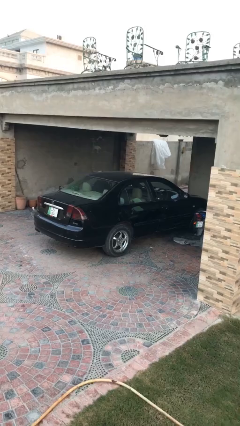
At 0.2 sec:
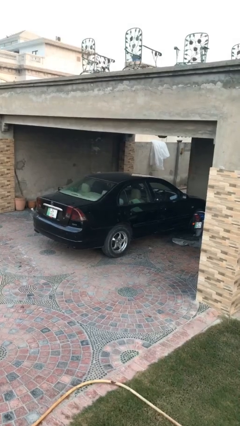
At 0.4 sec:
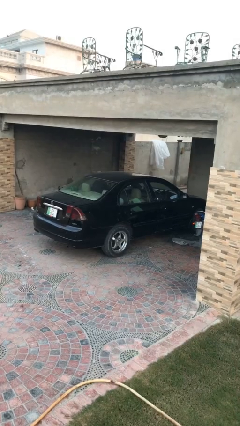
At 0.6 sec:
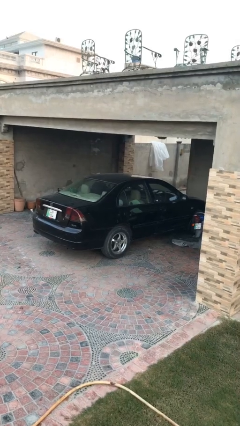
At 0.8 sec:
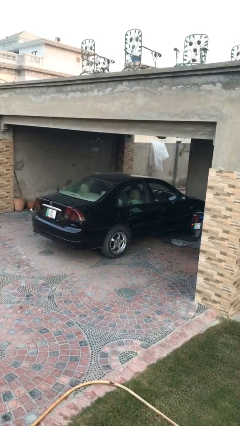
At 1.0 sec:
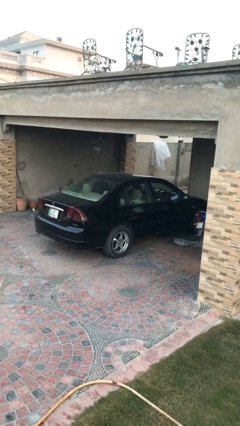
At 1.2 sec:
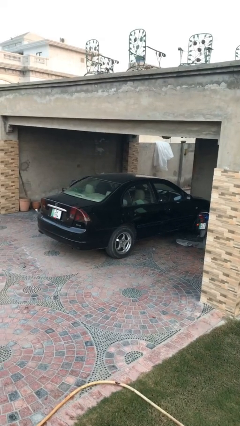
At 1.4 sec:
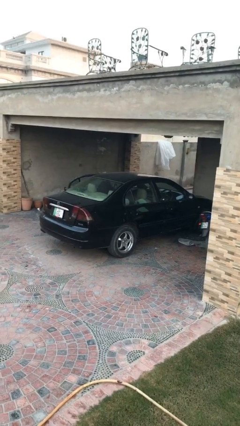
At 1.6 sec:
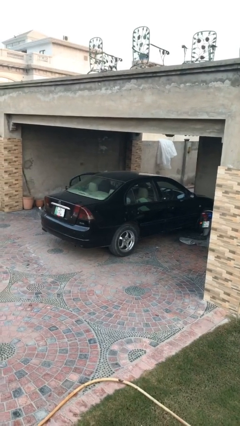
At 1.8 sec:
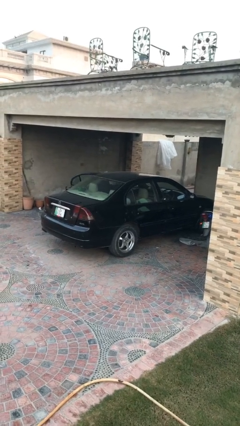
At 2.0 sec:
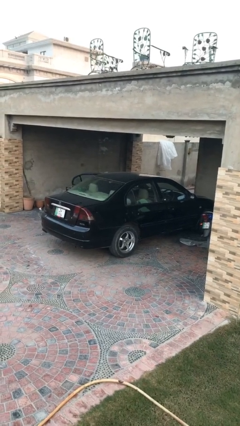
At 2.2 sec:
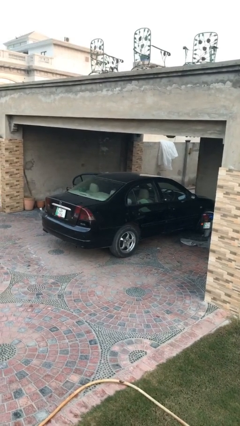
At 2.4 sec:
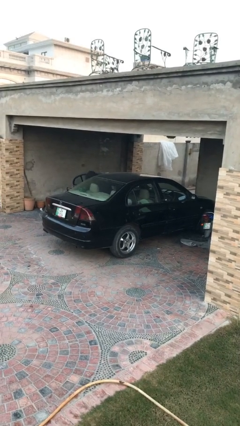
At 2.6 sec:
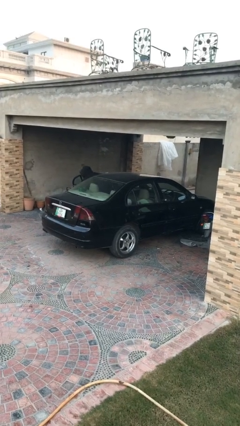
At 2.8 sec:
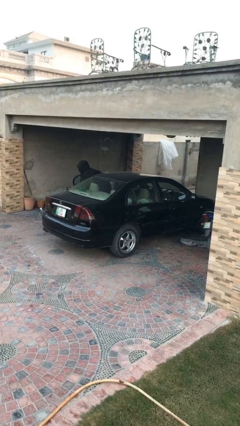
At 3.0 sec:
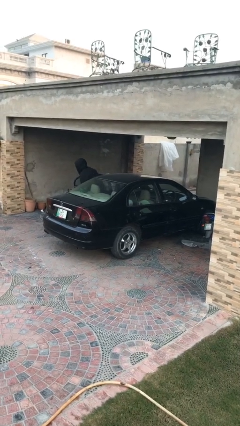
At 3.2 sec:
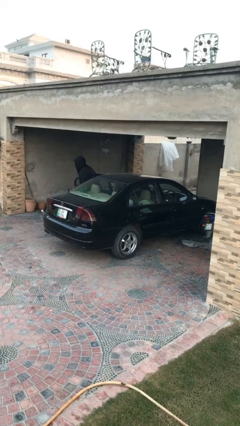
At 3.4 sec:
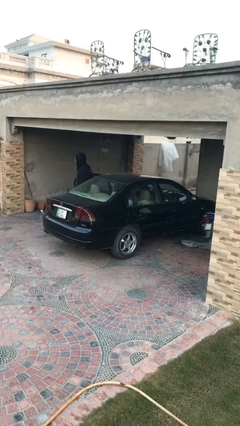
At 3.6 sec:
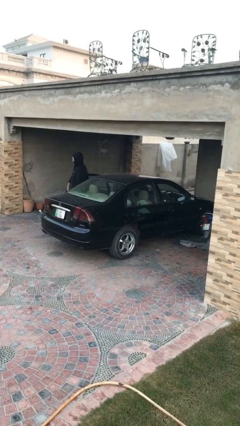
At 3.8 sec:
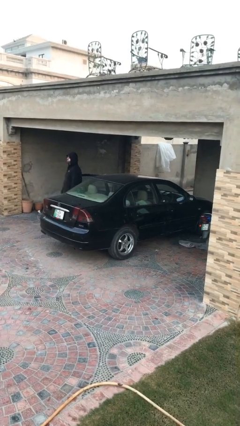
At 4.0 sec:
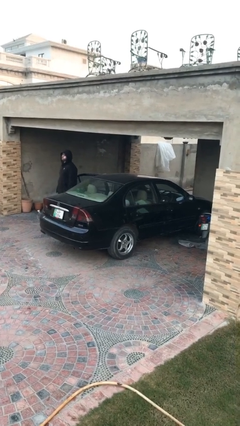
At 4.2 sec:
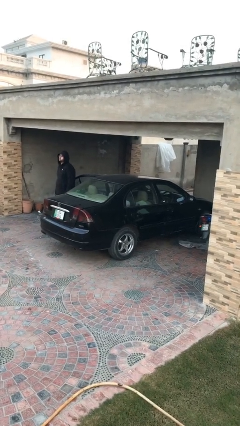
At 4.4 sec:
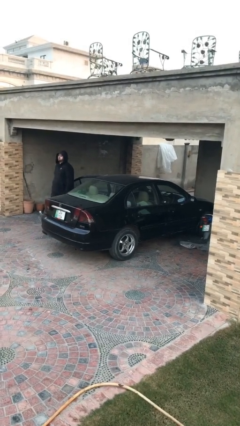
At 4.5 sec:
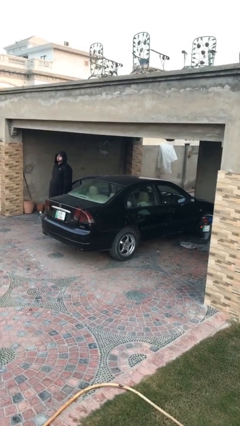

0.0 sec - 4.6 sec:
car drops off person

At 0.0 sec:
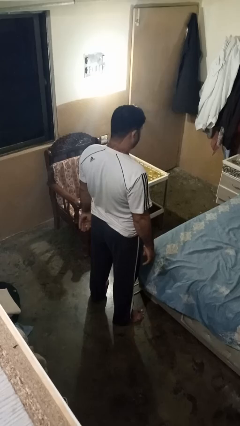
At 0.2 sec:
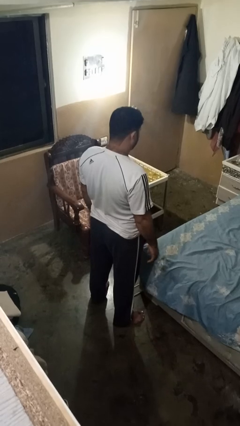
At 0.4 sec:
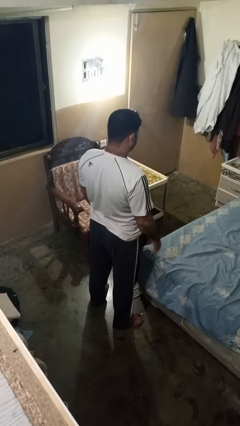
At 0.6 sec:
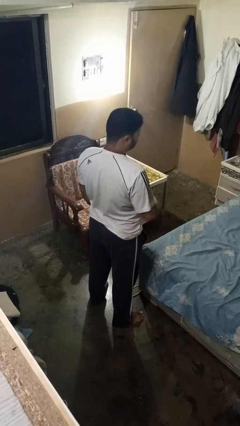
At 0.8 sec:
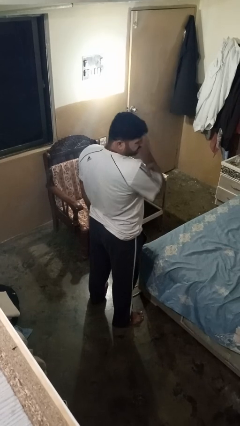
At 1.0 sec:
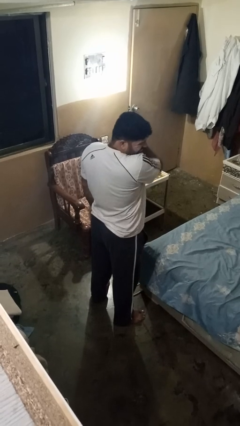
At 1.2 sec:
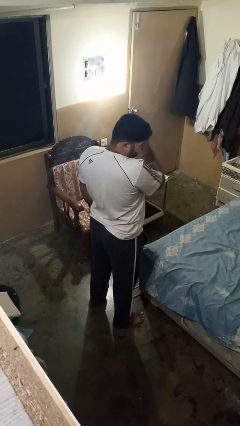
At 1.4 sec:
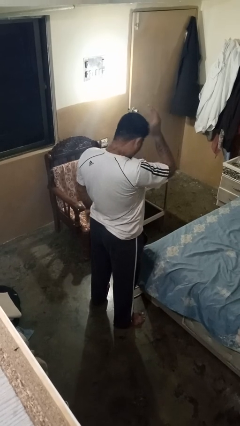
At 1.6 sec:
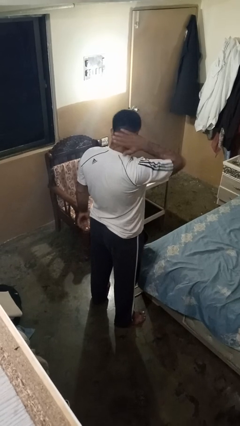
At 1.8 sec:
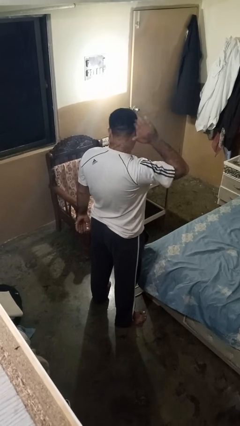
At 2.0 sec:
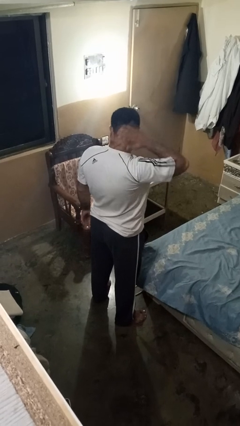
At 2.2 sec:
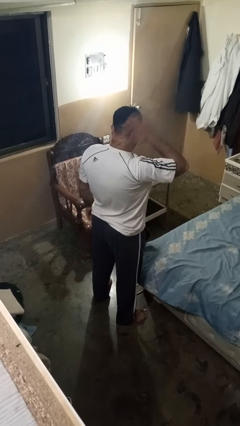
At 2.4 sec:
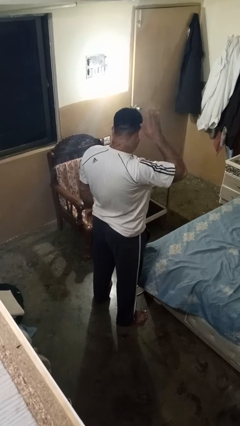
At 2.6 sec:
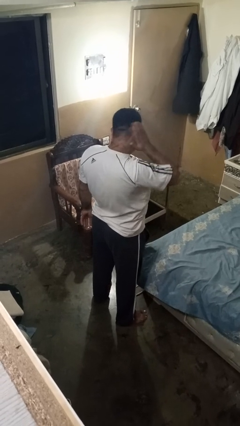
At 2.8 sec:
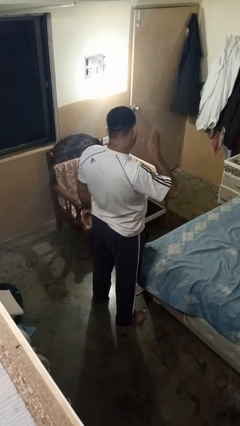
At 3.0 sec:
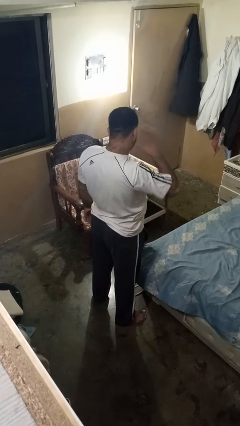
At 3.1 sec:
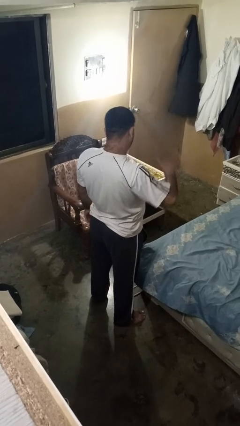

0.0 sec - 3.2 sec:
person swats bug

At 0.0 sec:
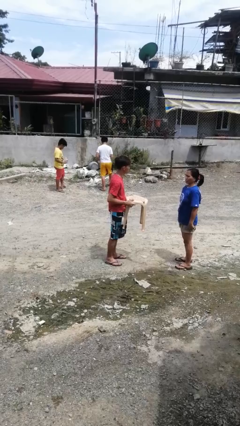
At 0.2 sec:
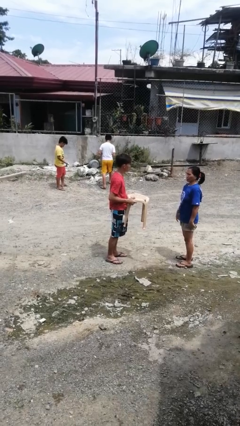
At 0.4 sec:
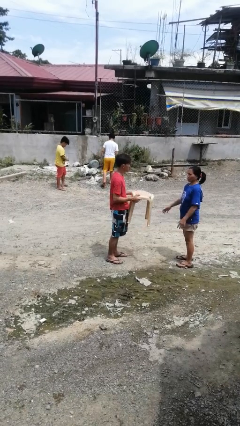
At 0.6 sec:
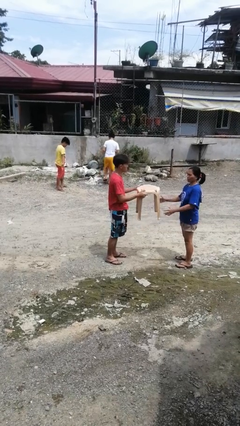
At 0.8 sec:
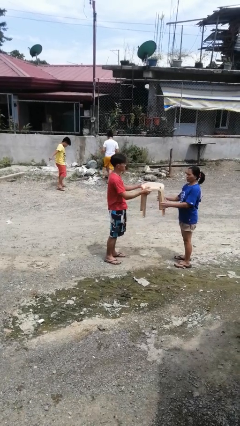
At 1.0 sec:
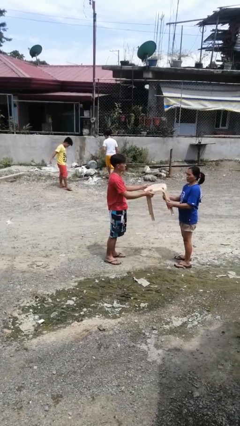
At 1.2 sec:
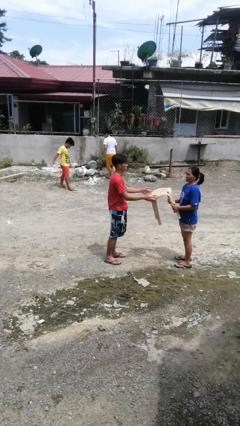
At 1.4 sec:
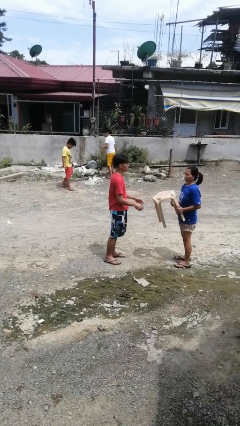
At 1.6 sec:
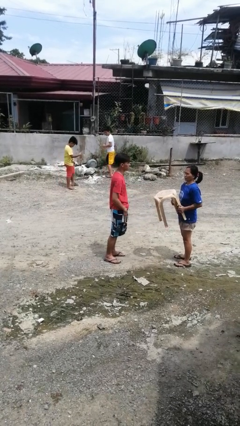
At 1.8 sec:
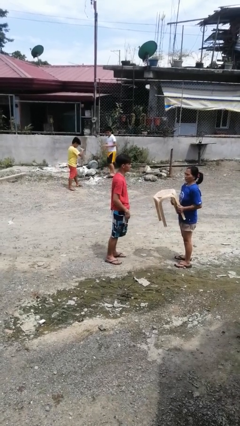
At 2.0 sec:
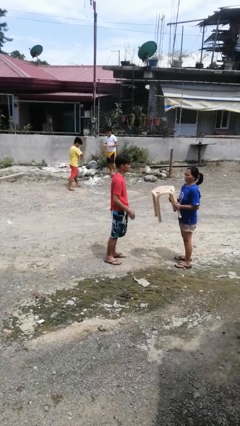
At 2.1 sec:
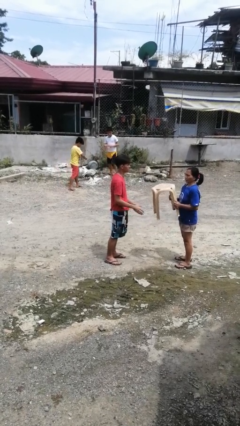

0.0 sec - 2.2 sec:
person transfers object to person

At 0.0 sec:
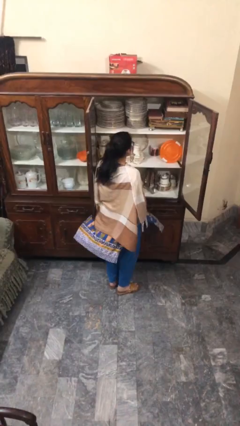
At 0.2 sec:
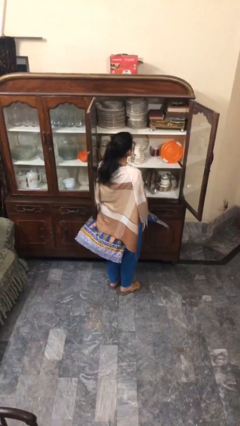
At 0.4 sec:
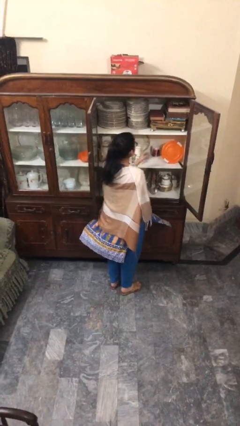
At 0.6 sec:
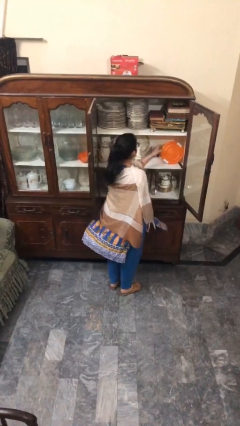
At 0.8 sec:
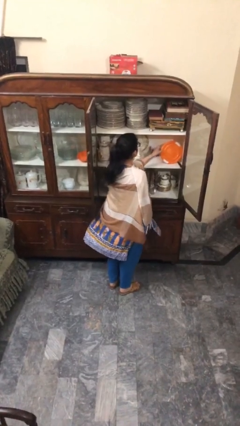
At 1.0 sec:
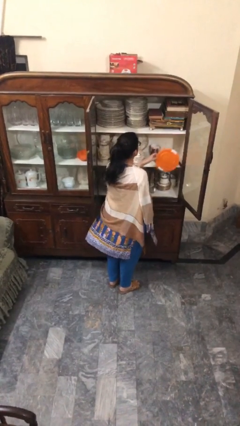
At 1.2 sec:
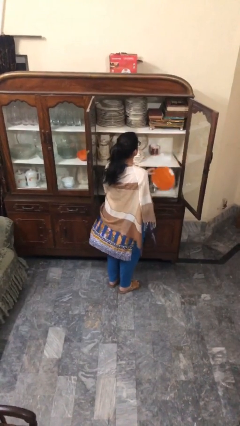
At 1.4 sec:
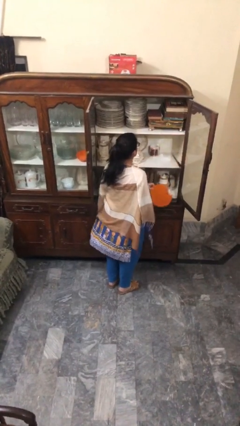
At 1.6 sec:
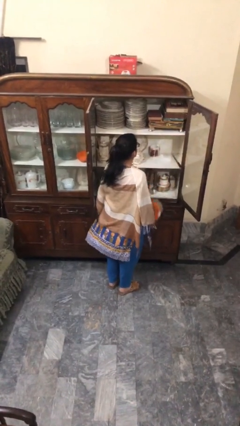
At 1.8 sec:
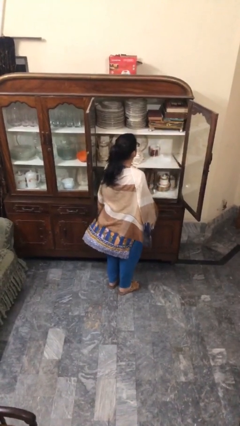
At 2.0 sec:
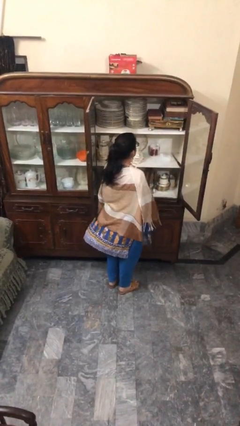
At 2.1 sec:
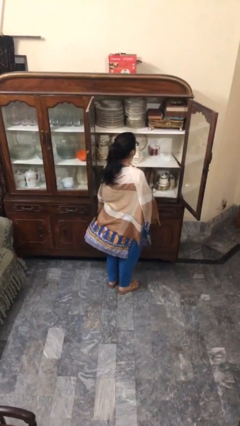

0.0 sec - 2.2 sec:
person takes object from cabinet

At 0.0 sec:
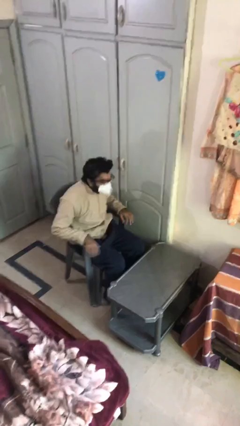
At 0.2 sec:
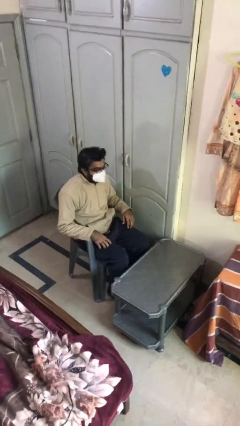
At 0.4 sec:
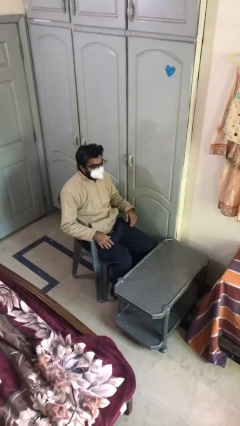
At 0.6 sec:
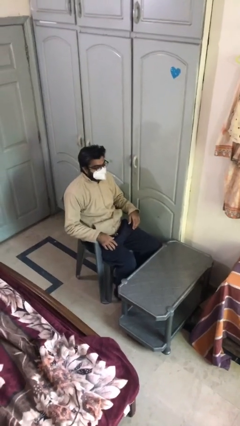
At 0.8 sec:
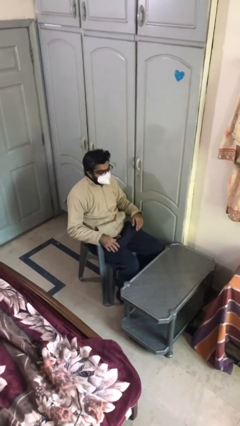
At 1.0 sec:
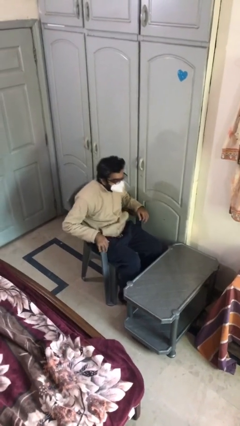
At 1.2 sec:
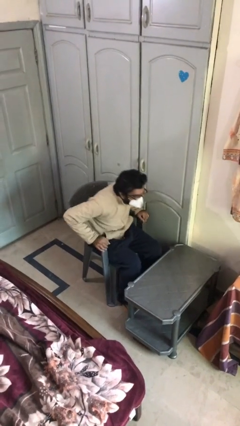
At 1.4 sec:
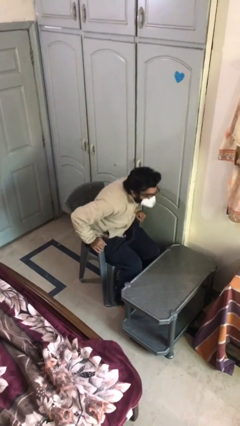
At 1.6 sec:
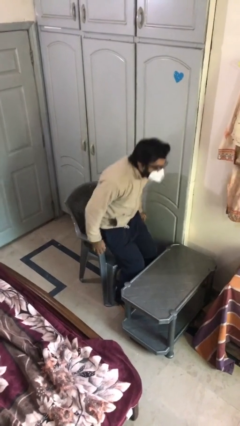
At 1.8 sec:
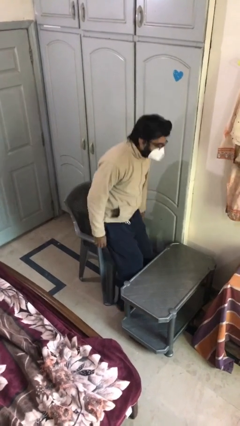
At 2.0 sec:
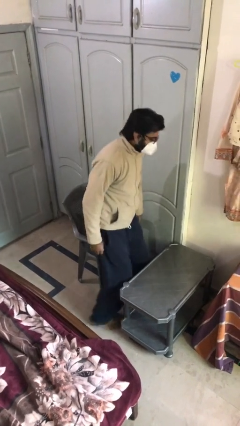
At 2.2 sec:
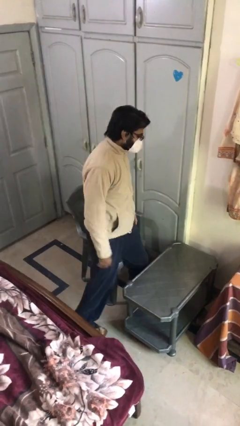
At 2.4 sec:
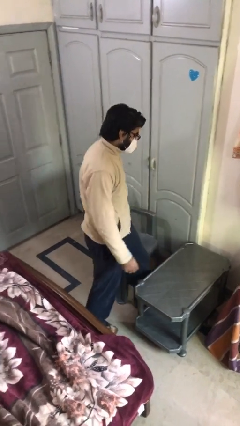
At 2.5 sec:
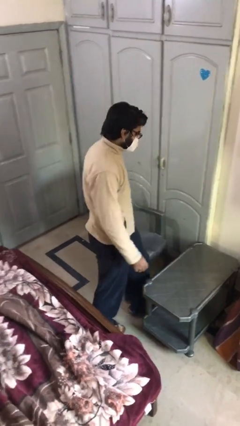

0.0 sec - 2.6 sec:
person stands up

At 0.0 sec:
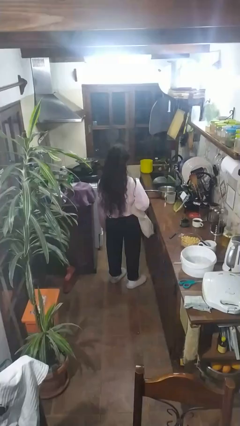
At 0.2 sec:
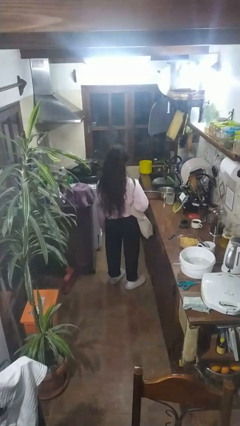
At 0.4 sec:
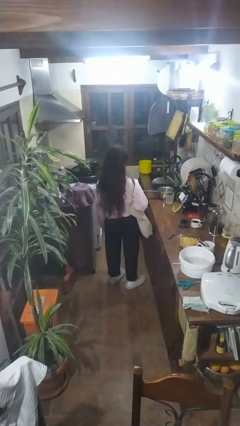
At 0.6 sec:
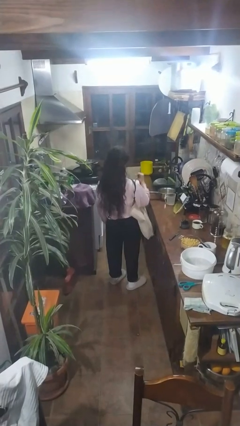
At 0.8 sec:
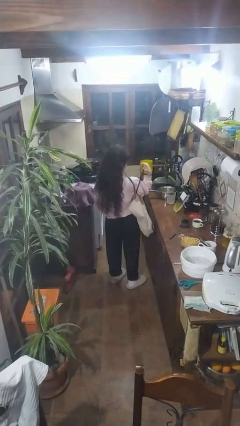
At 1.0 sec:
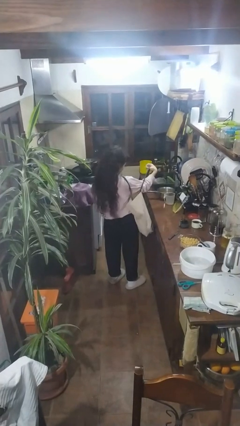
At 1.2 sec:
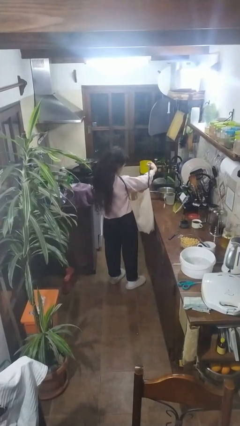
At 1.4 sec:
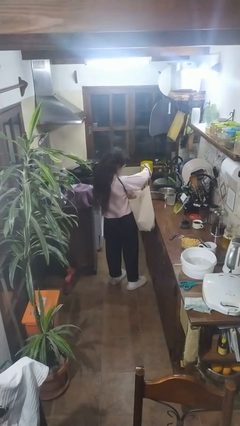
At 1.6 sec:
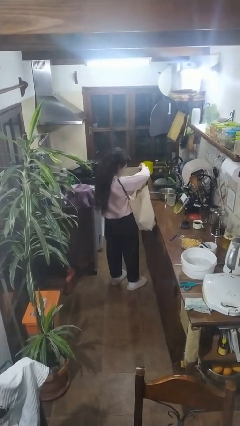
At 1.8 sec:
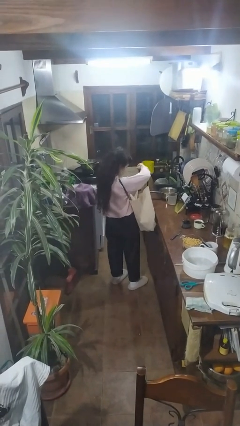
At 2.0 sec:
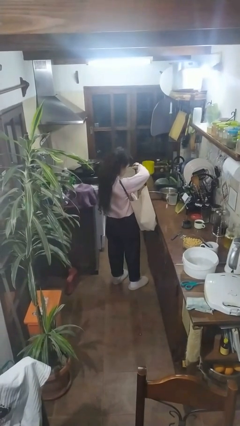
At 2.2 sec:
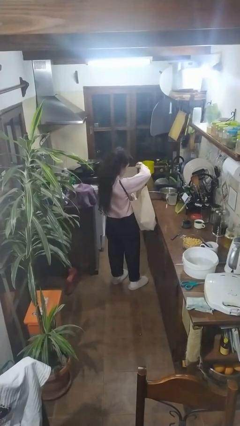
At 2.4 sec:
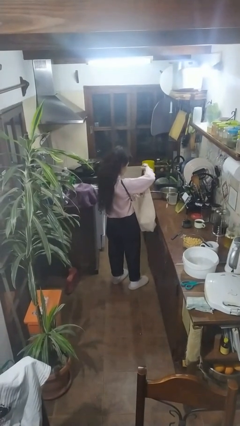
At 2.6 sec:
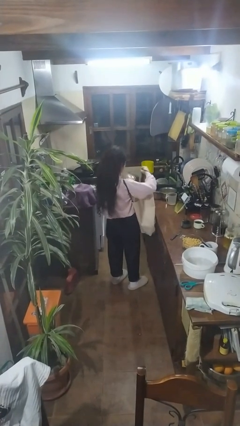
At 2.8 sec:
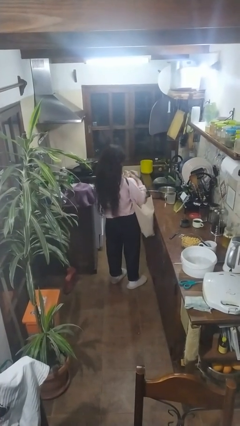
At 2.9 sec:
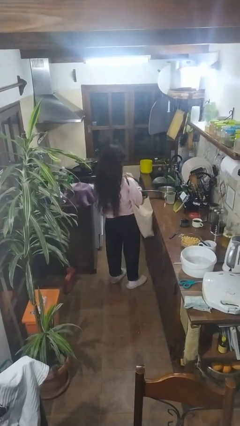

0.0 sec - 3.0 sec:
person takes object from bag
